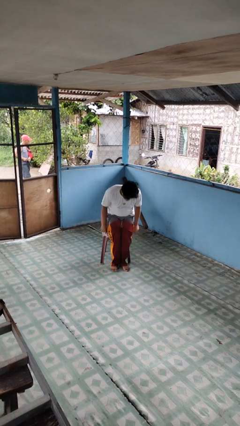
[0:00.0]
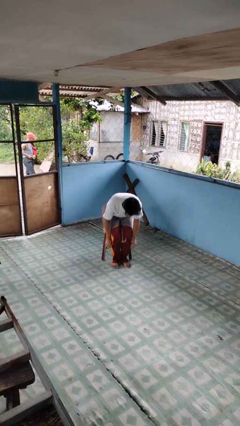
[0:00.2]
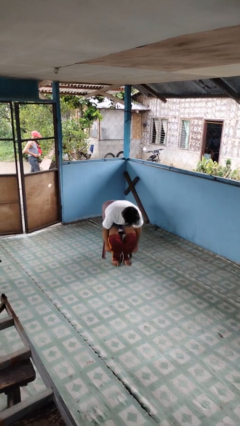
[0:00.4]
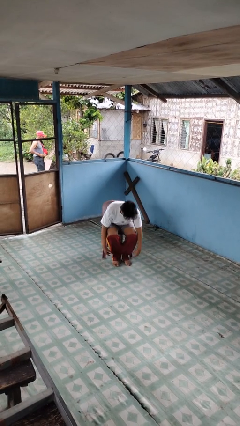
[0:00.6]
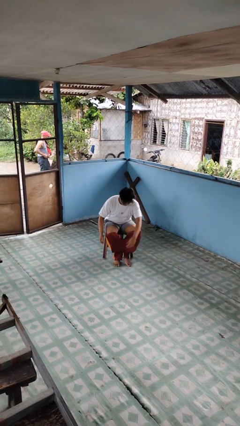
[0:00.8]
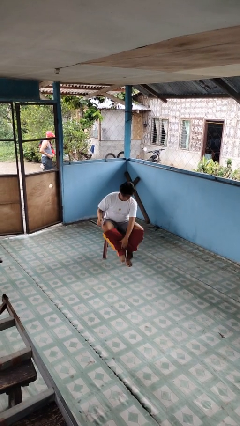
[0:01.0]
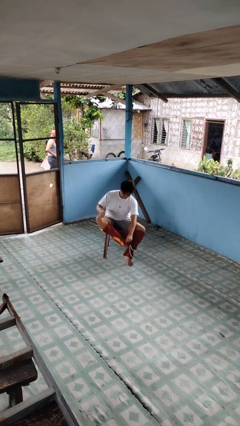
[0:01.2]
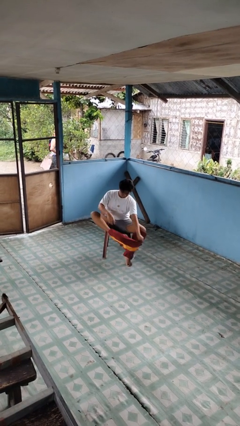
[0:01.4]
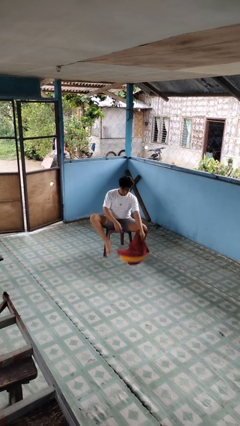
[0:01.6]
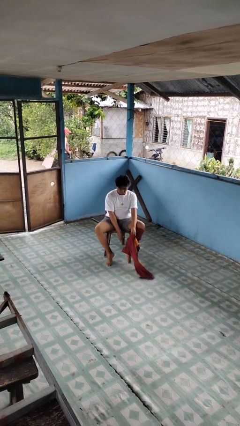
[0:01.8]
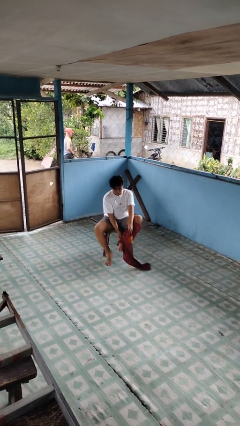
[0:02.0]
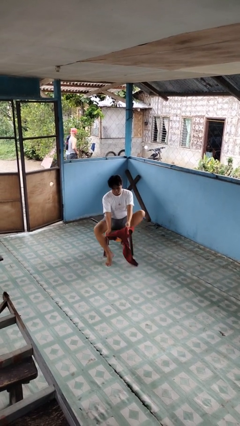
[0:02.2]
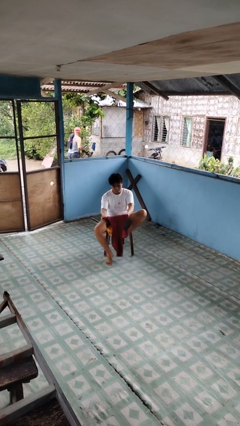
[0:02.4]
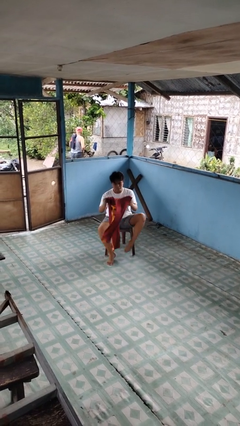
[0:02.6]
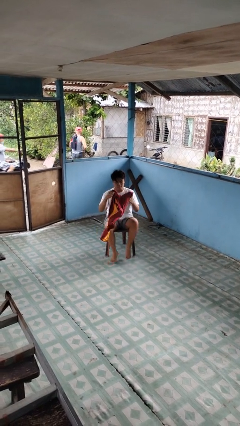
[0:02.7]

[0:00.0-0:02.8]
person takes off pants

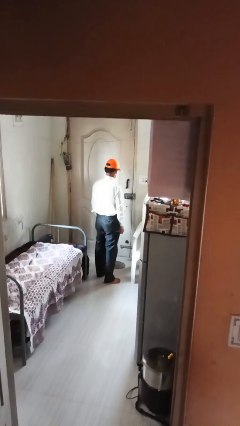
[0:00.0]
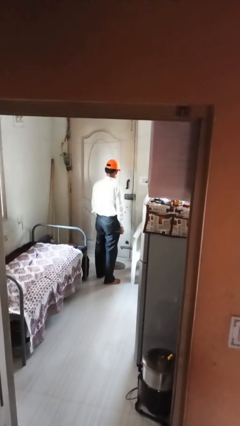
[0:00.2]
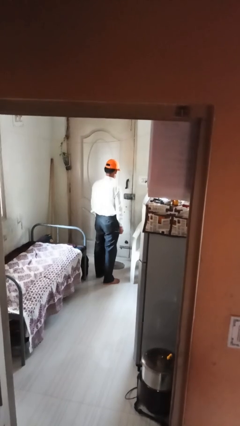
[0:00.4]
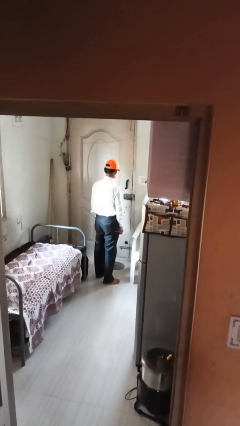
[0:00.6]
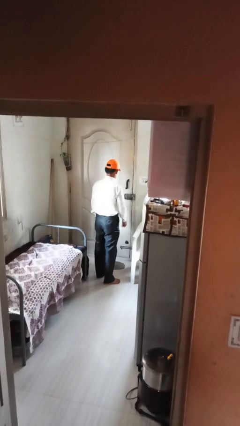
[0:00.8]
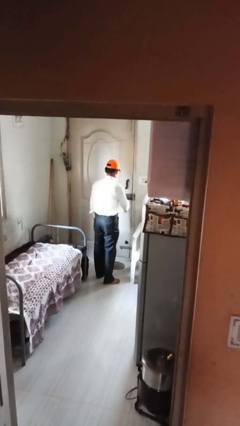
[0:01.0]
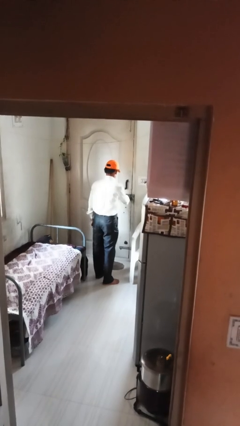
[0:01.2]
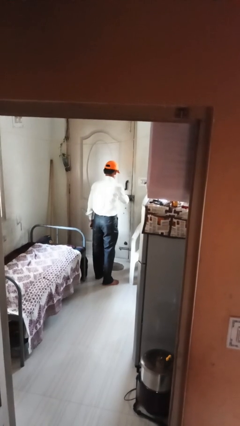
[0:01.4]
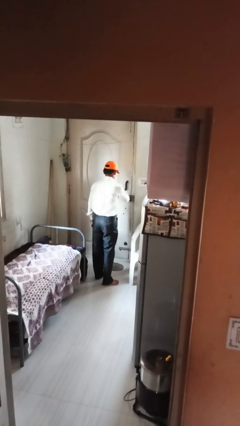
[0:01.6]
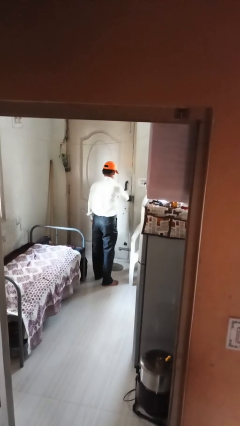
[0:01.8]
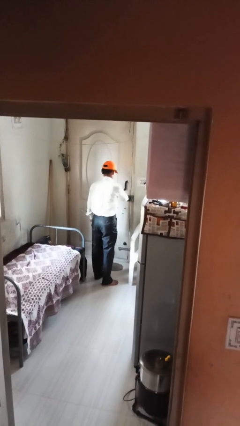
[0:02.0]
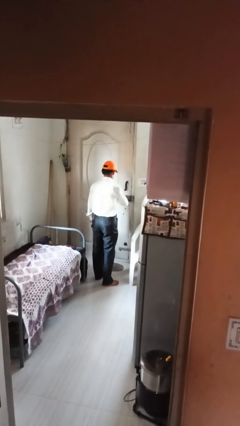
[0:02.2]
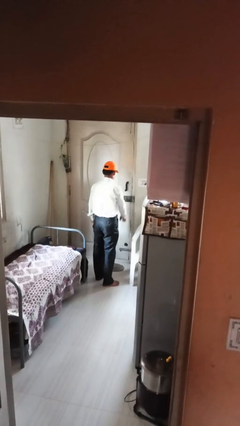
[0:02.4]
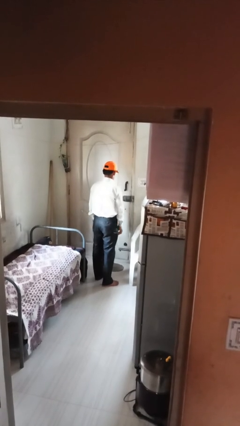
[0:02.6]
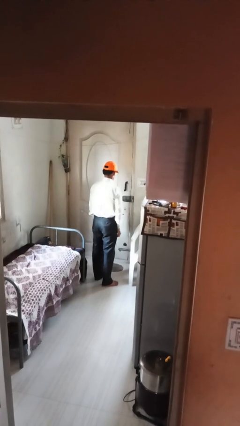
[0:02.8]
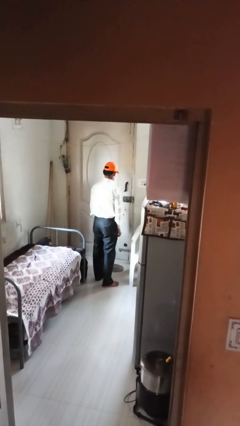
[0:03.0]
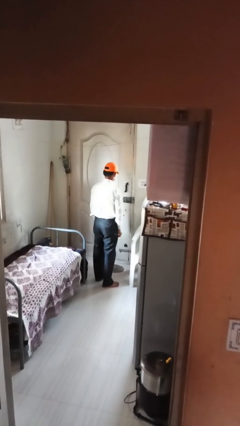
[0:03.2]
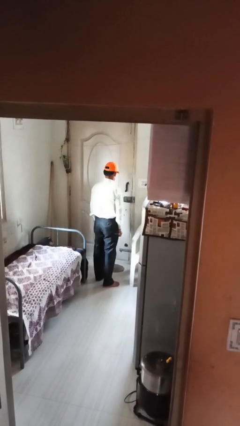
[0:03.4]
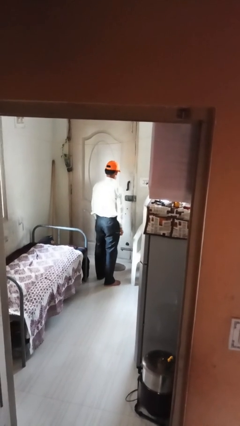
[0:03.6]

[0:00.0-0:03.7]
person unlocks door with keys

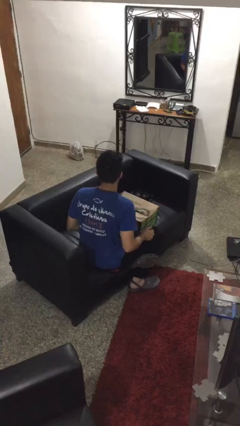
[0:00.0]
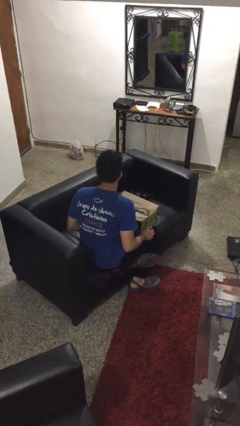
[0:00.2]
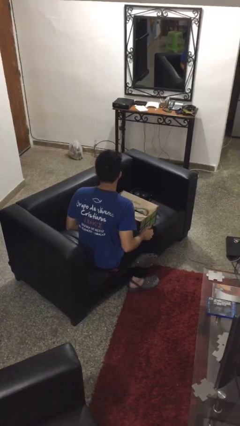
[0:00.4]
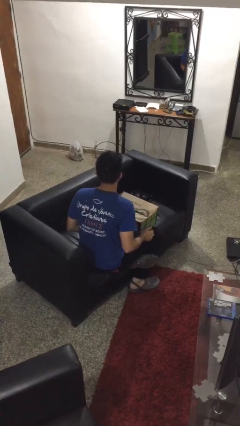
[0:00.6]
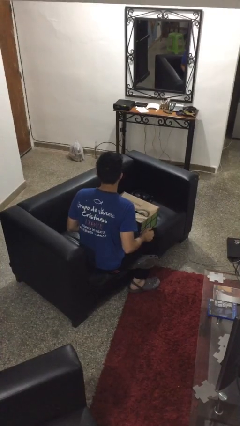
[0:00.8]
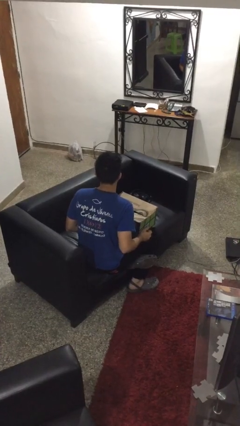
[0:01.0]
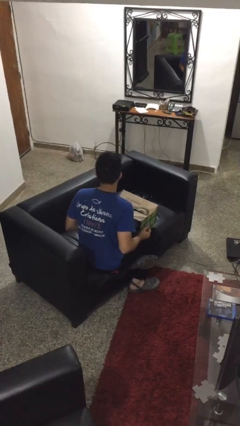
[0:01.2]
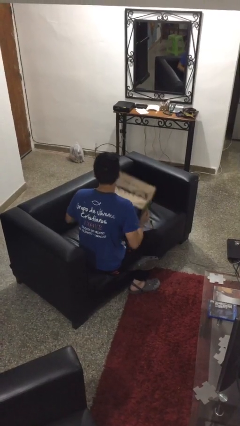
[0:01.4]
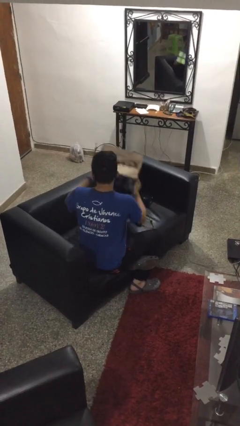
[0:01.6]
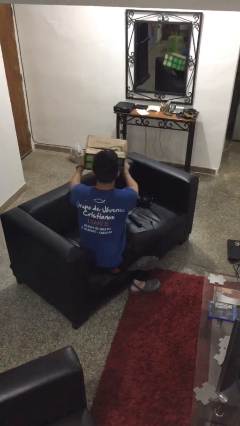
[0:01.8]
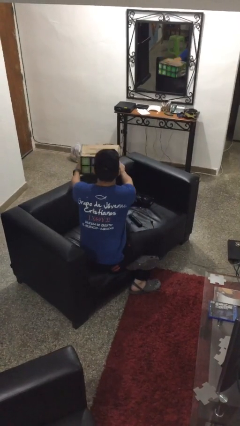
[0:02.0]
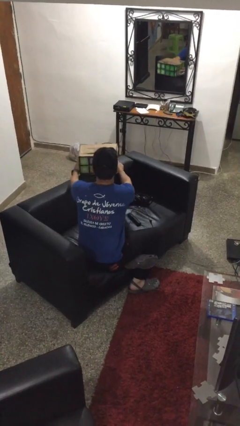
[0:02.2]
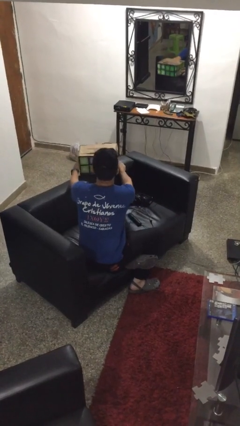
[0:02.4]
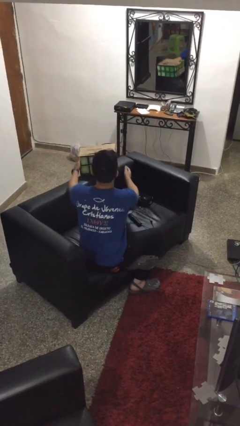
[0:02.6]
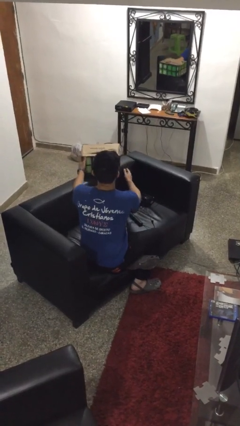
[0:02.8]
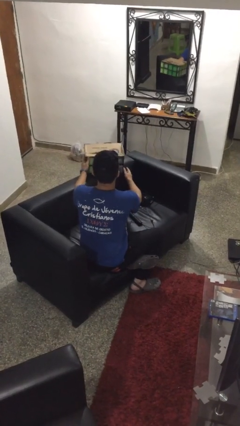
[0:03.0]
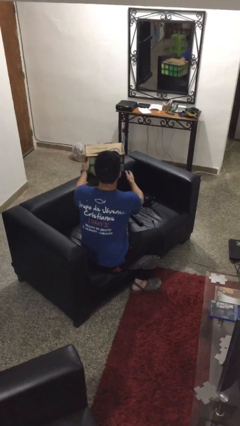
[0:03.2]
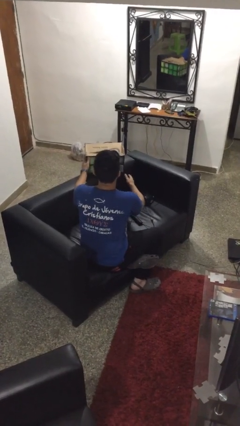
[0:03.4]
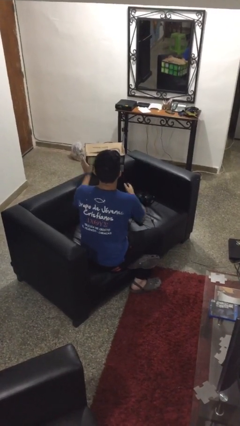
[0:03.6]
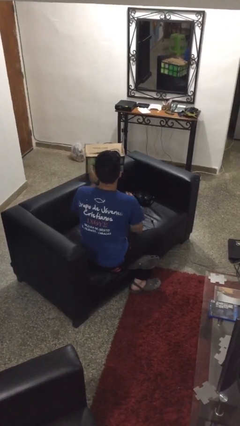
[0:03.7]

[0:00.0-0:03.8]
person puts down object on couch

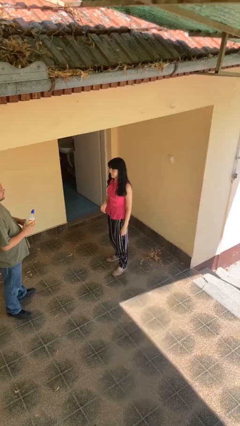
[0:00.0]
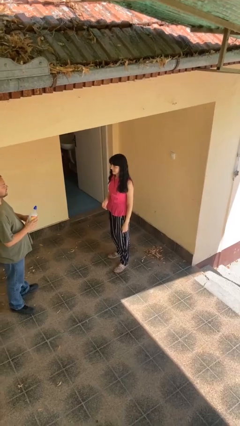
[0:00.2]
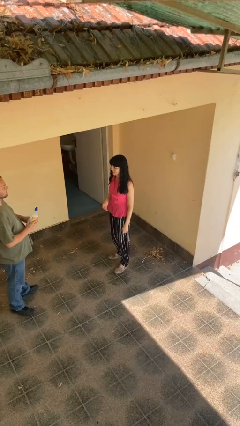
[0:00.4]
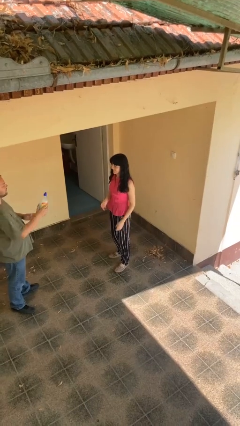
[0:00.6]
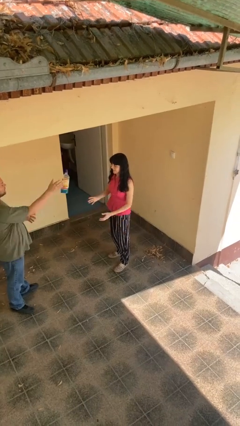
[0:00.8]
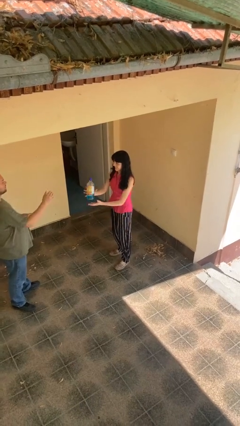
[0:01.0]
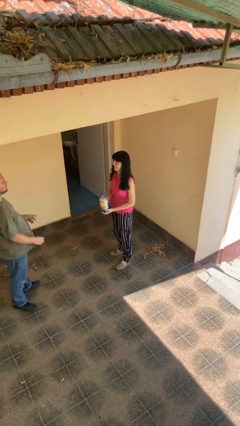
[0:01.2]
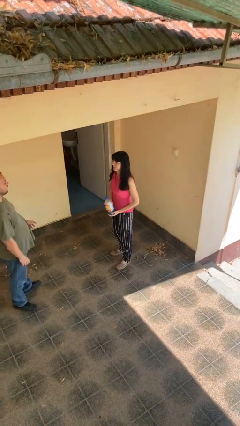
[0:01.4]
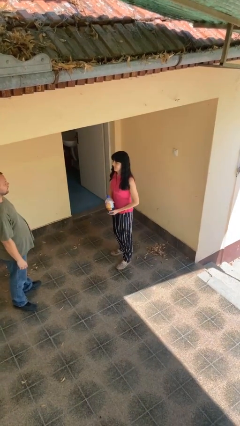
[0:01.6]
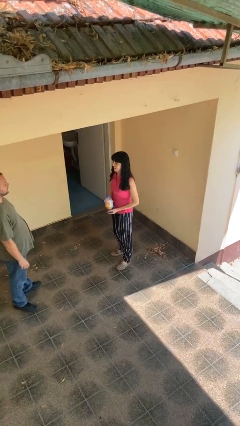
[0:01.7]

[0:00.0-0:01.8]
person catches object from person

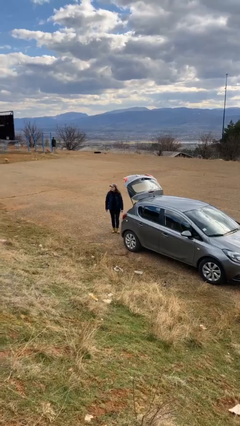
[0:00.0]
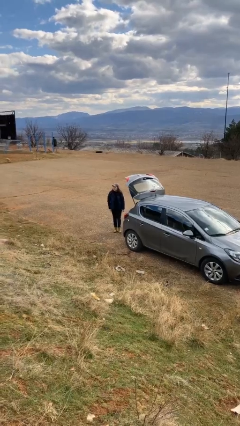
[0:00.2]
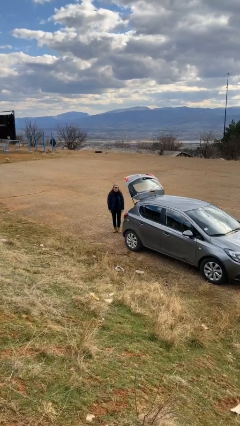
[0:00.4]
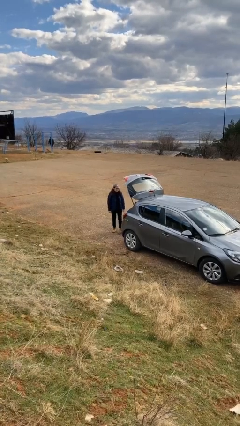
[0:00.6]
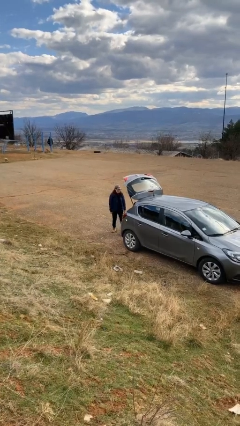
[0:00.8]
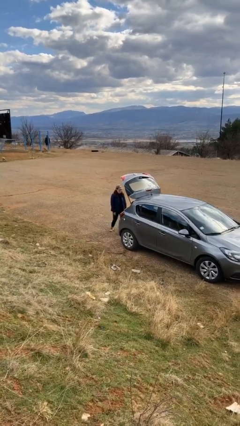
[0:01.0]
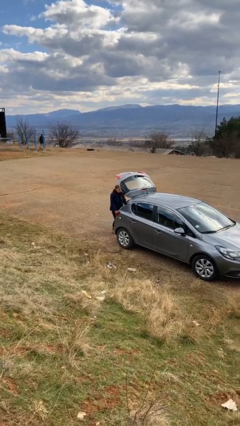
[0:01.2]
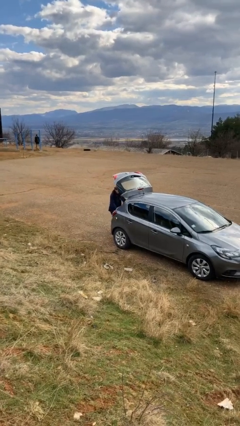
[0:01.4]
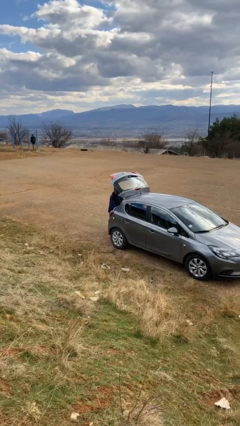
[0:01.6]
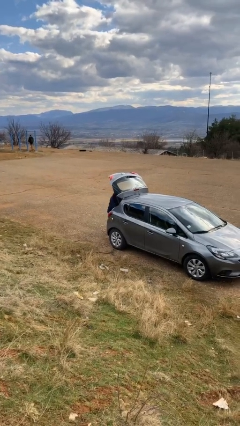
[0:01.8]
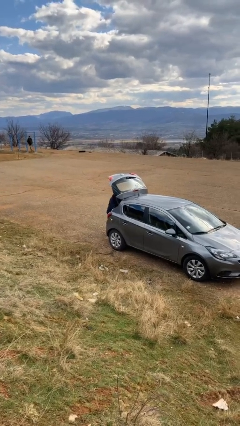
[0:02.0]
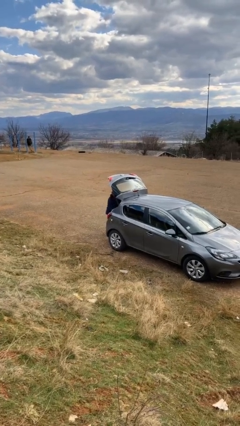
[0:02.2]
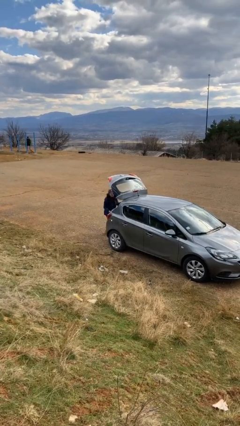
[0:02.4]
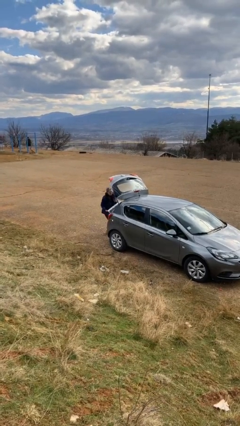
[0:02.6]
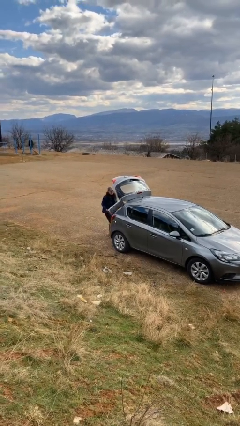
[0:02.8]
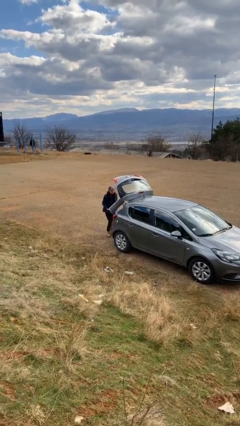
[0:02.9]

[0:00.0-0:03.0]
person unloads car

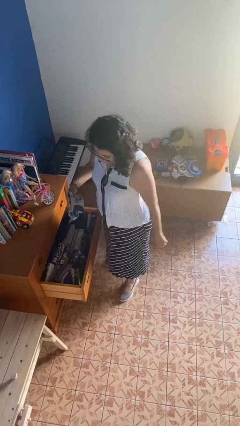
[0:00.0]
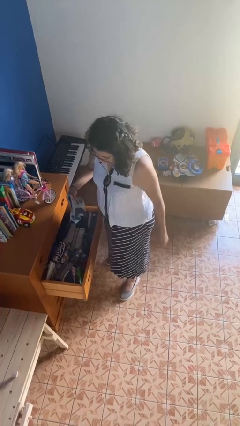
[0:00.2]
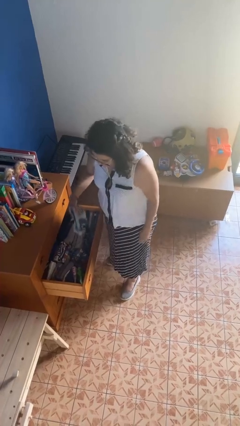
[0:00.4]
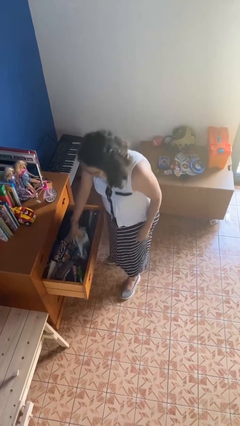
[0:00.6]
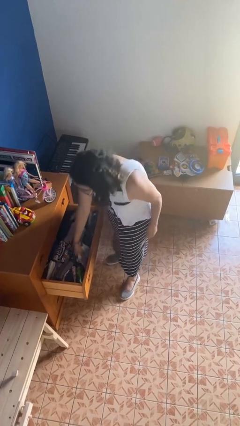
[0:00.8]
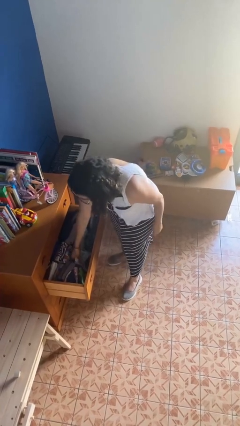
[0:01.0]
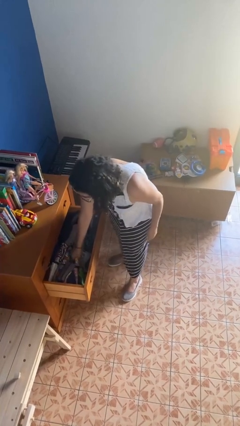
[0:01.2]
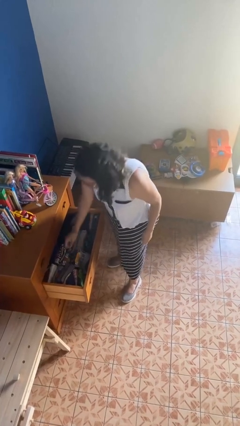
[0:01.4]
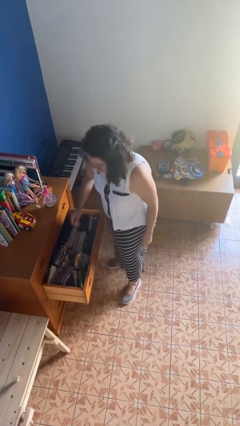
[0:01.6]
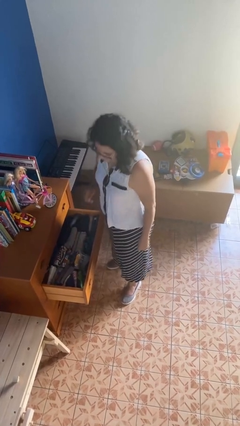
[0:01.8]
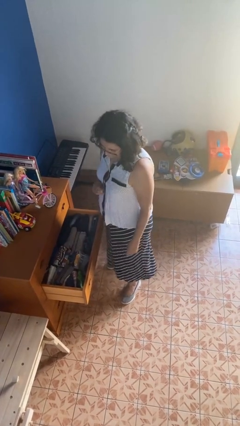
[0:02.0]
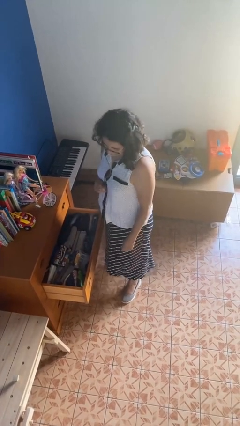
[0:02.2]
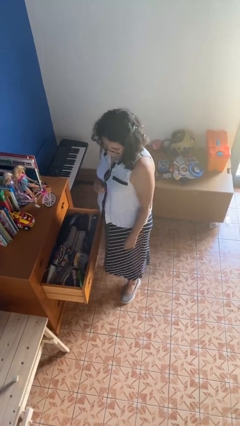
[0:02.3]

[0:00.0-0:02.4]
person puts clothes into dresser
